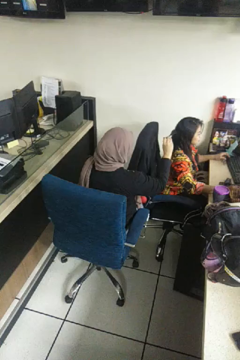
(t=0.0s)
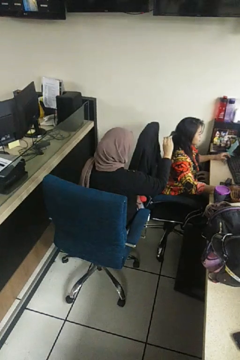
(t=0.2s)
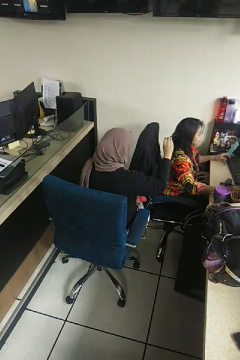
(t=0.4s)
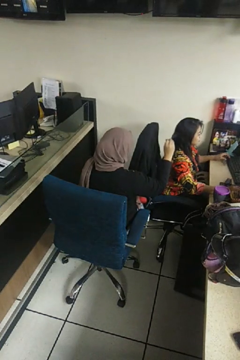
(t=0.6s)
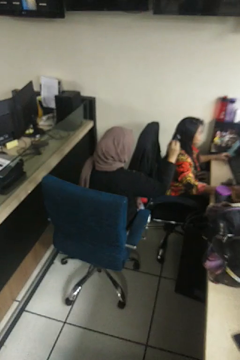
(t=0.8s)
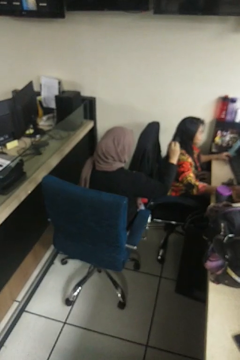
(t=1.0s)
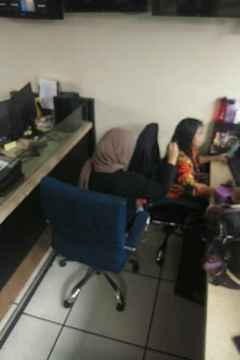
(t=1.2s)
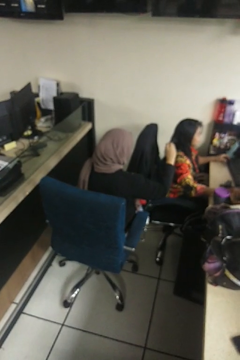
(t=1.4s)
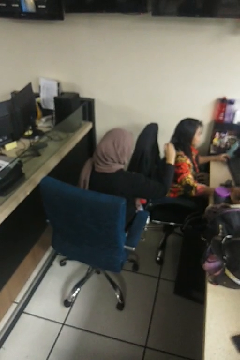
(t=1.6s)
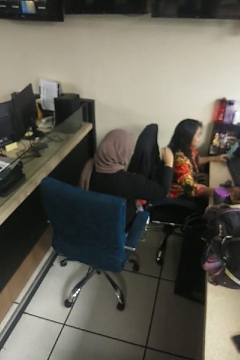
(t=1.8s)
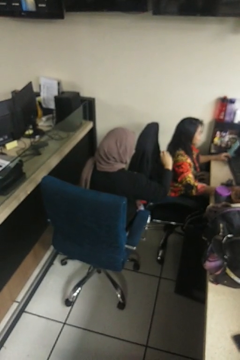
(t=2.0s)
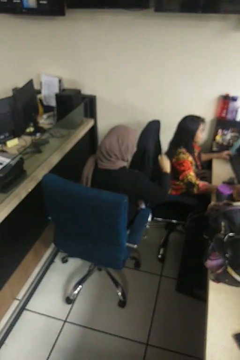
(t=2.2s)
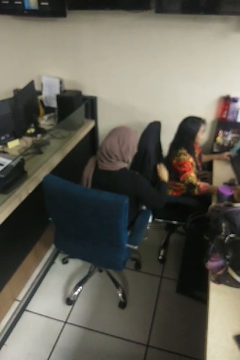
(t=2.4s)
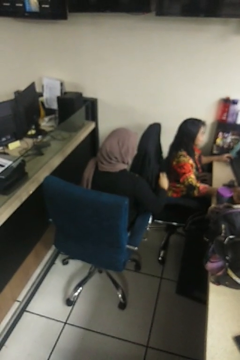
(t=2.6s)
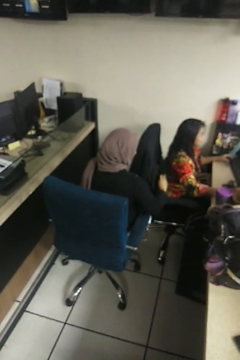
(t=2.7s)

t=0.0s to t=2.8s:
person brushes hair of person

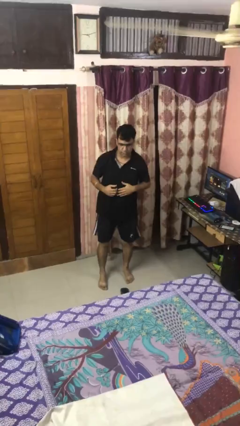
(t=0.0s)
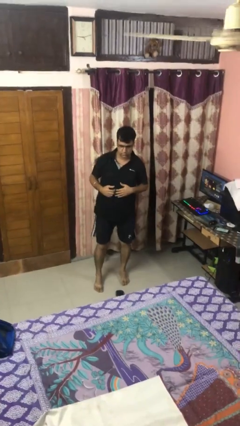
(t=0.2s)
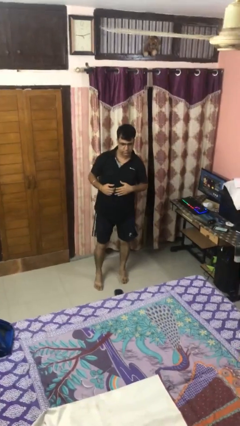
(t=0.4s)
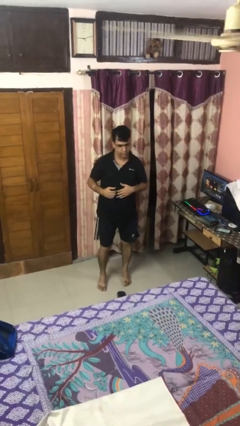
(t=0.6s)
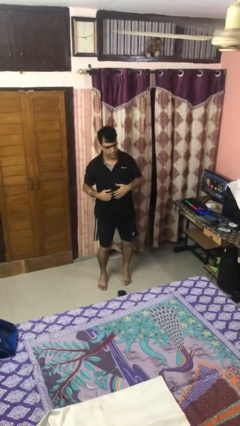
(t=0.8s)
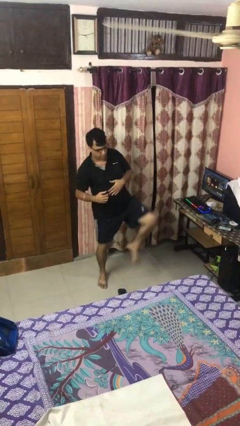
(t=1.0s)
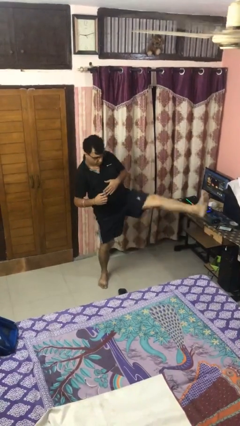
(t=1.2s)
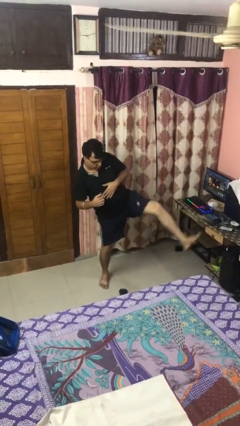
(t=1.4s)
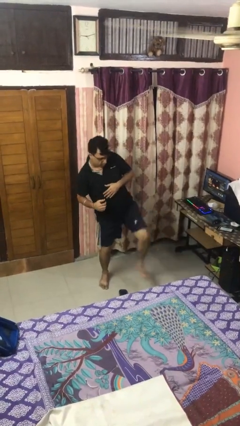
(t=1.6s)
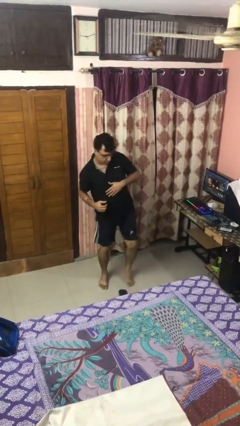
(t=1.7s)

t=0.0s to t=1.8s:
person karate kicks

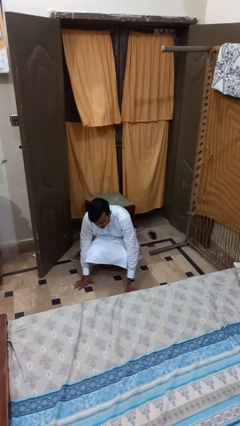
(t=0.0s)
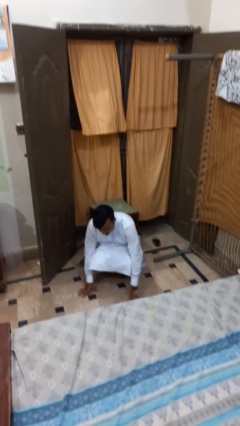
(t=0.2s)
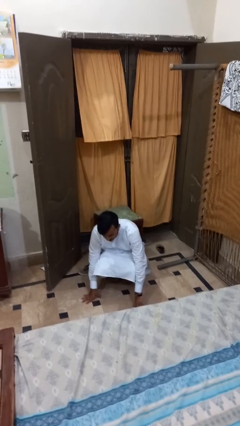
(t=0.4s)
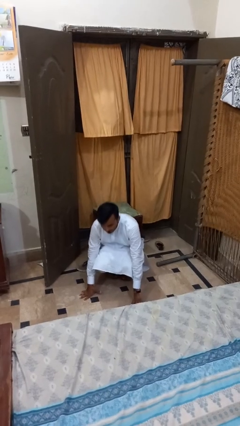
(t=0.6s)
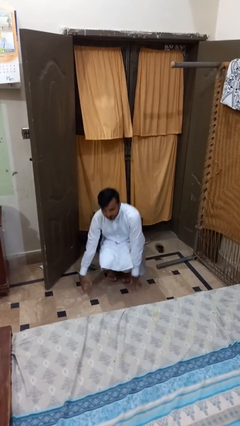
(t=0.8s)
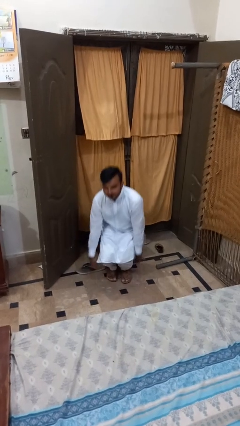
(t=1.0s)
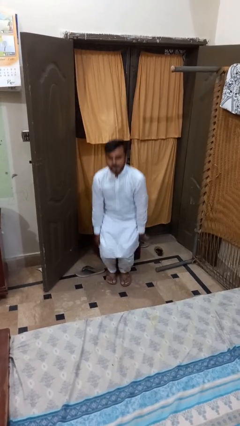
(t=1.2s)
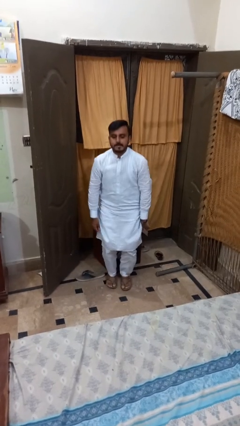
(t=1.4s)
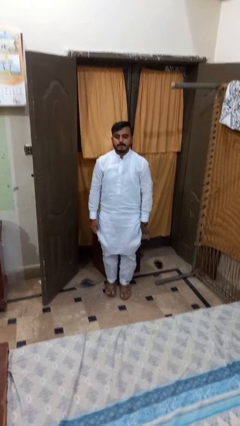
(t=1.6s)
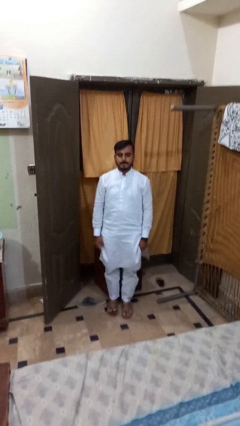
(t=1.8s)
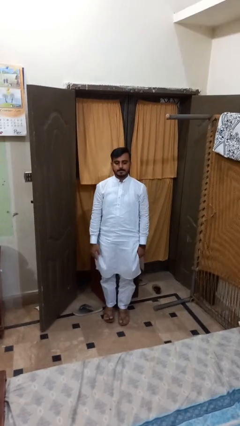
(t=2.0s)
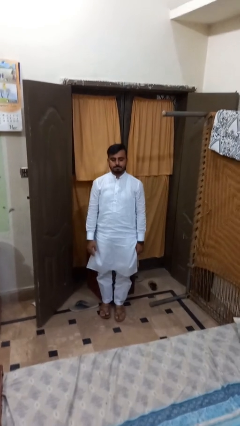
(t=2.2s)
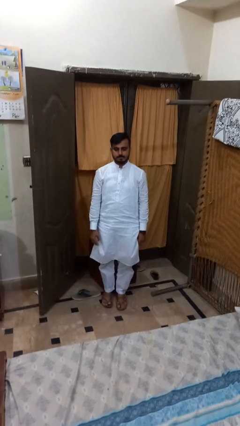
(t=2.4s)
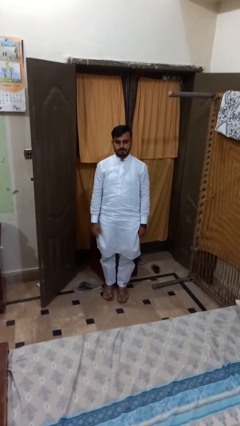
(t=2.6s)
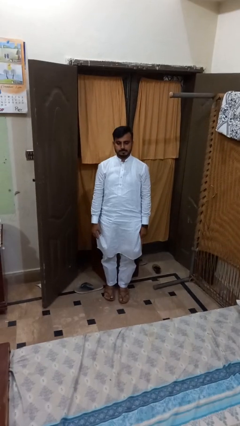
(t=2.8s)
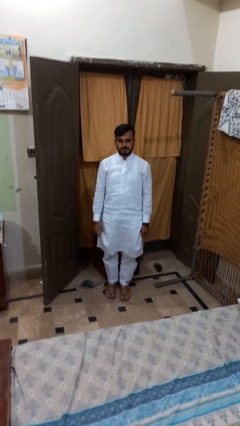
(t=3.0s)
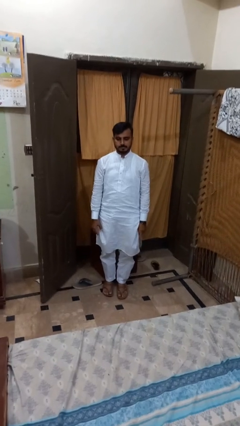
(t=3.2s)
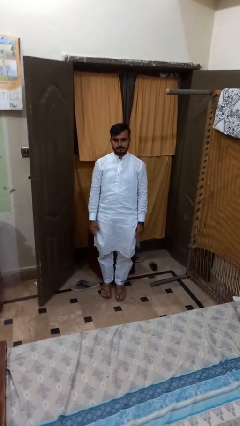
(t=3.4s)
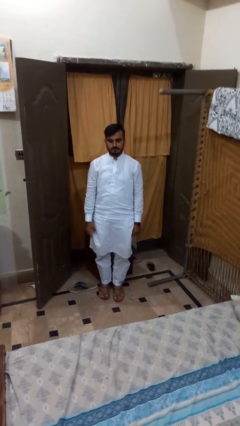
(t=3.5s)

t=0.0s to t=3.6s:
person stands up from floor

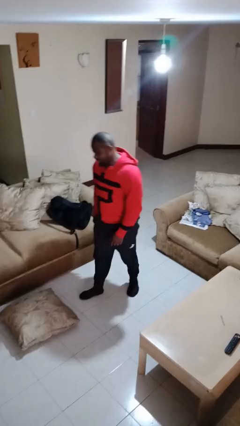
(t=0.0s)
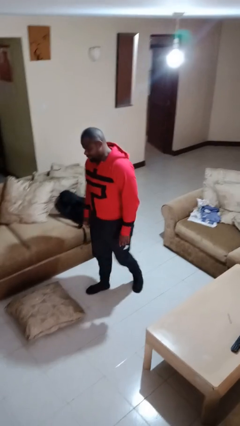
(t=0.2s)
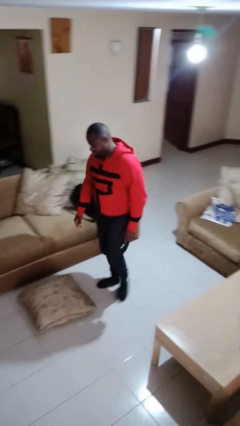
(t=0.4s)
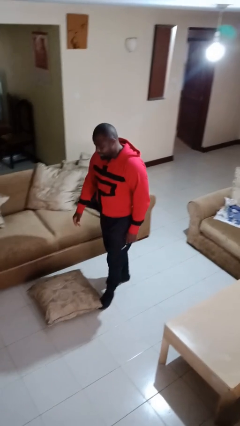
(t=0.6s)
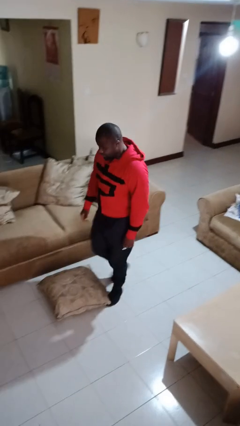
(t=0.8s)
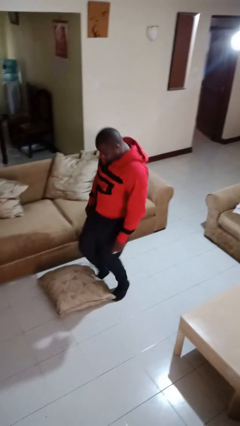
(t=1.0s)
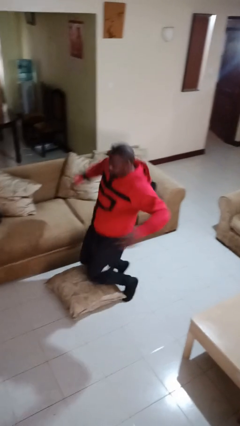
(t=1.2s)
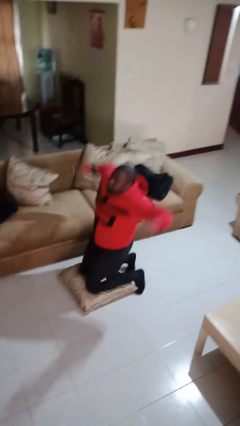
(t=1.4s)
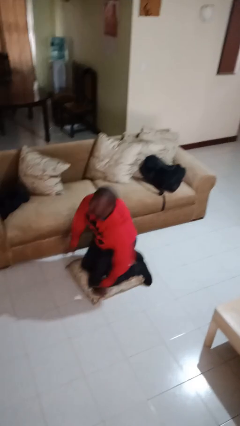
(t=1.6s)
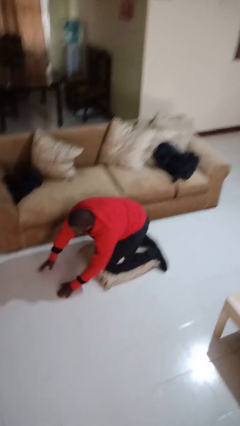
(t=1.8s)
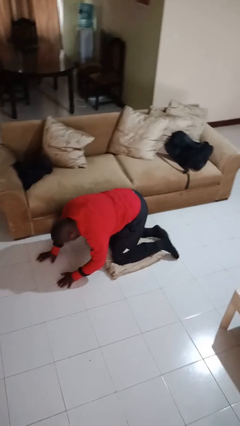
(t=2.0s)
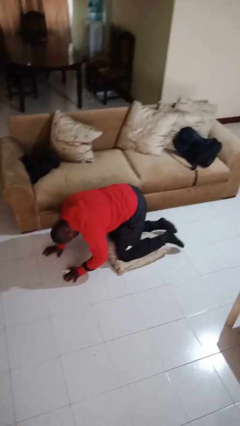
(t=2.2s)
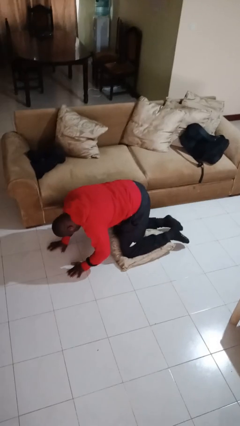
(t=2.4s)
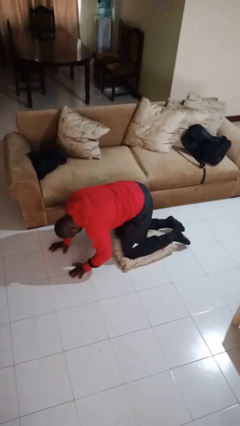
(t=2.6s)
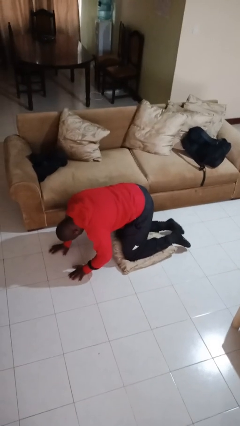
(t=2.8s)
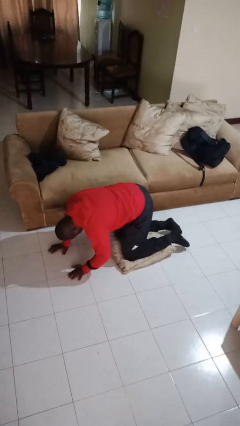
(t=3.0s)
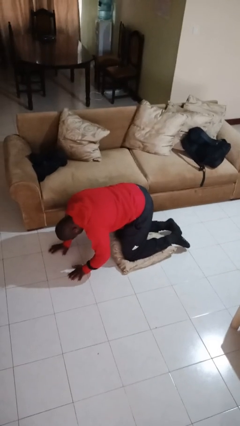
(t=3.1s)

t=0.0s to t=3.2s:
person trips on object on floor

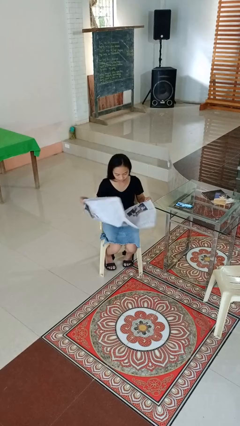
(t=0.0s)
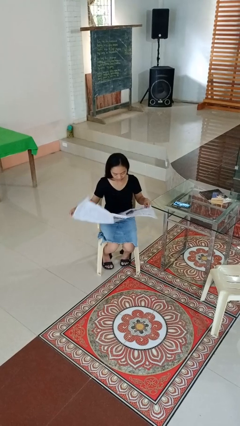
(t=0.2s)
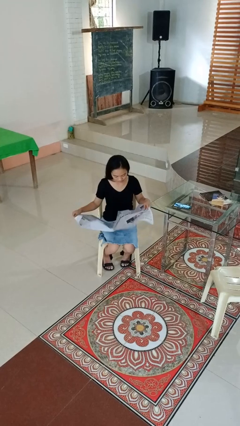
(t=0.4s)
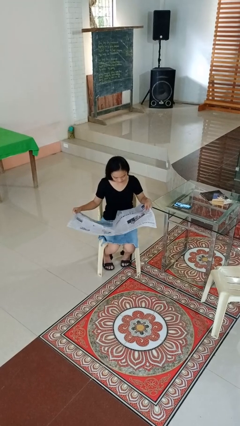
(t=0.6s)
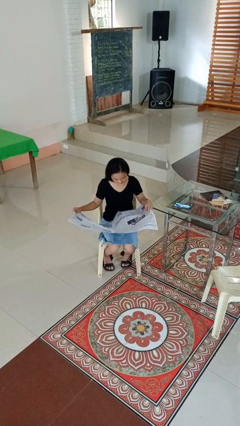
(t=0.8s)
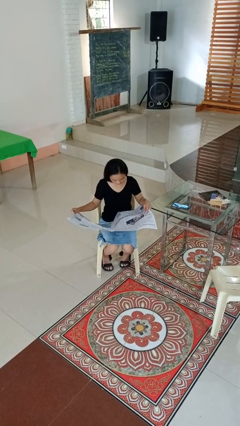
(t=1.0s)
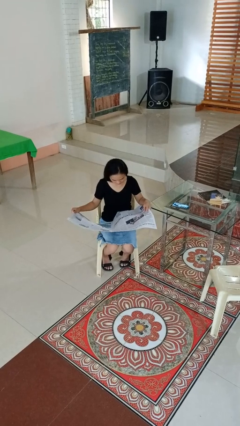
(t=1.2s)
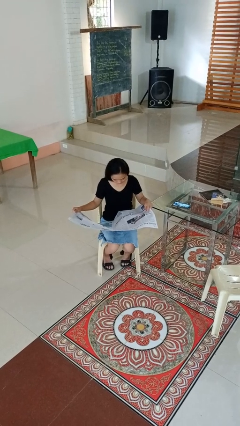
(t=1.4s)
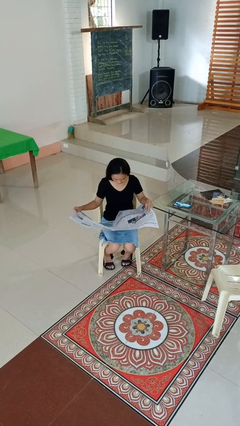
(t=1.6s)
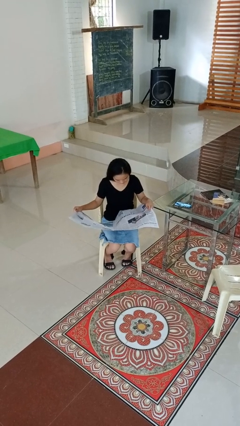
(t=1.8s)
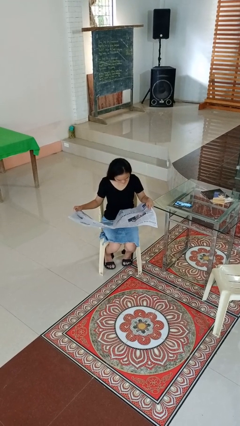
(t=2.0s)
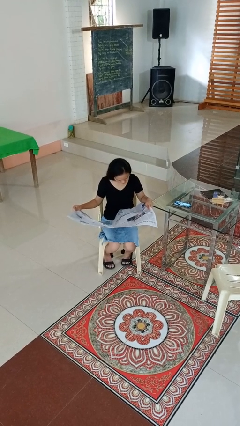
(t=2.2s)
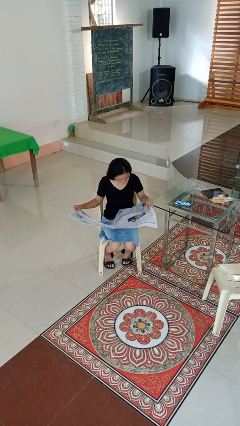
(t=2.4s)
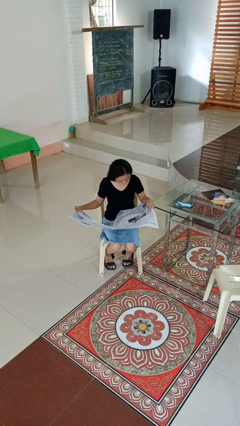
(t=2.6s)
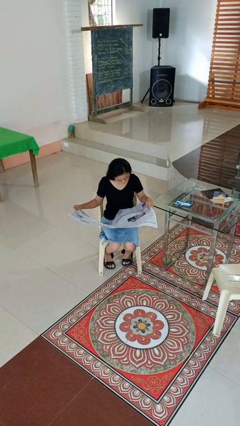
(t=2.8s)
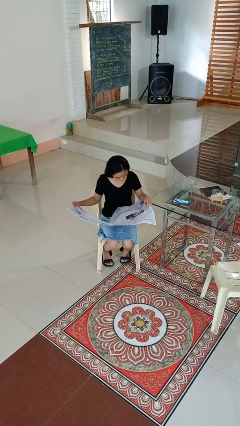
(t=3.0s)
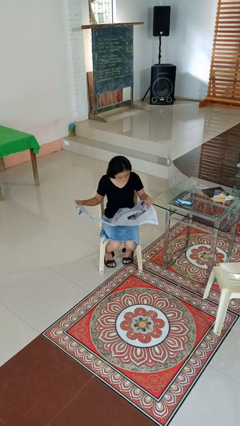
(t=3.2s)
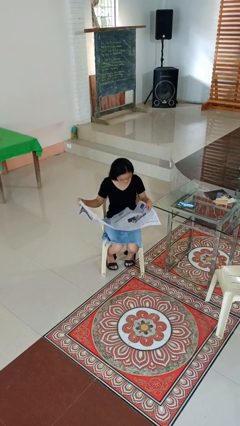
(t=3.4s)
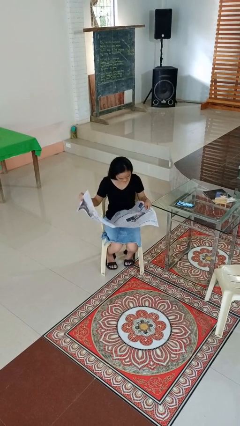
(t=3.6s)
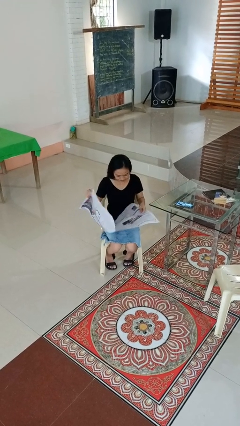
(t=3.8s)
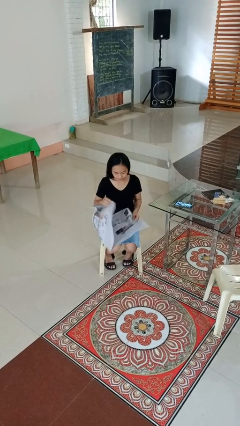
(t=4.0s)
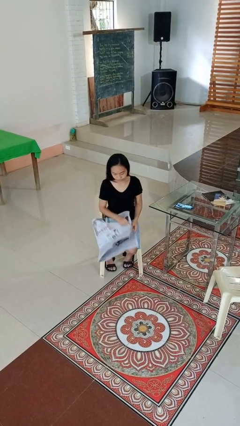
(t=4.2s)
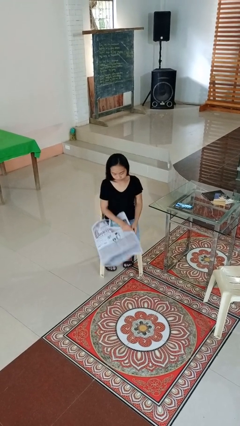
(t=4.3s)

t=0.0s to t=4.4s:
person reads newspaper

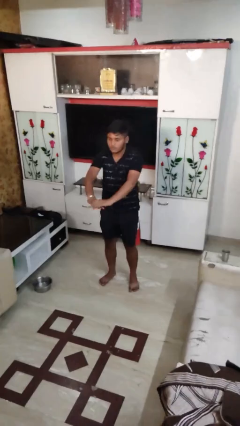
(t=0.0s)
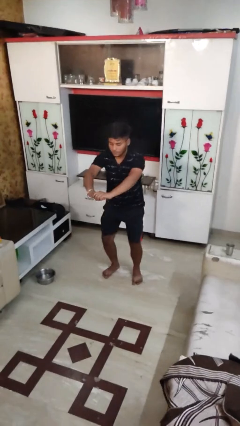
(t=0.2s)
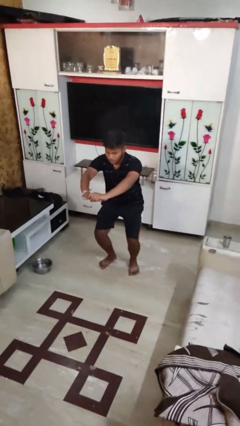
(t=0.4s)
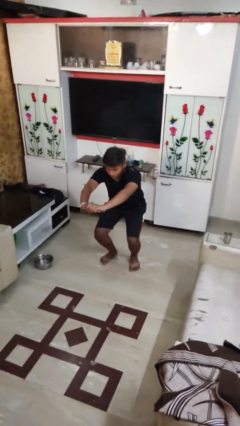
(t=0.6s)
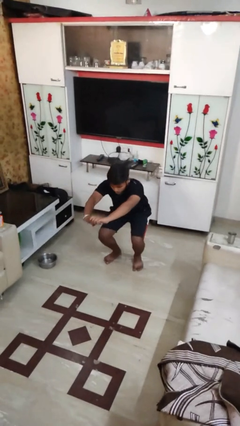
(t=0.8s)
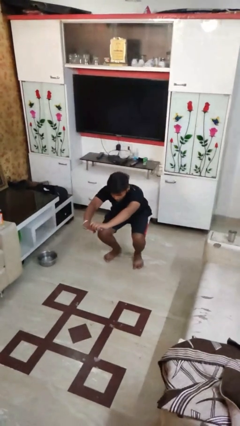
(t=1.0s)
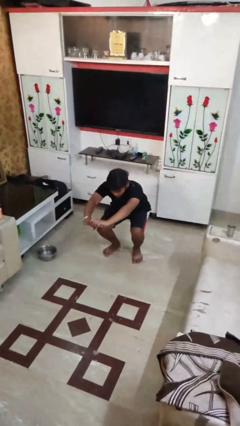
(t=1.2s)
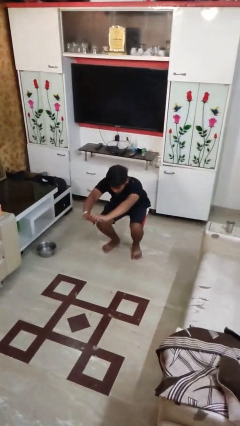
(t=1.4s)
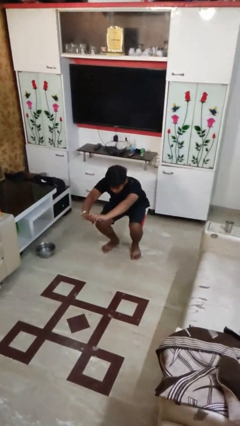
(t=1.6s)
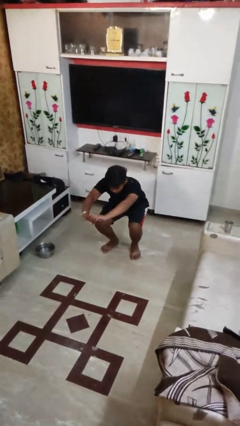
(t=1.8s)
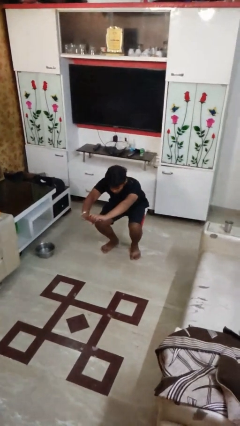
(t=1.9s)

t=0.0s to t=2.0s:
person squats
